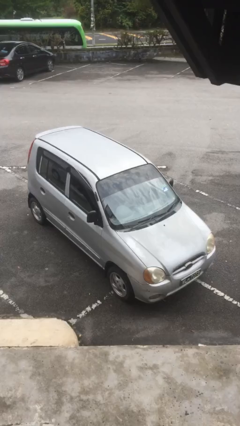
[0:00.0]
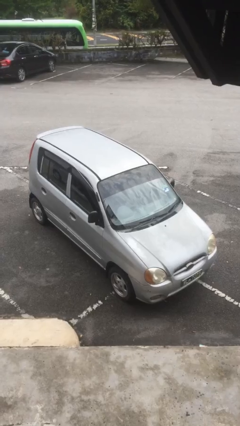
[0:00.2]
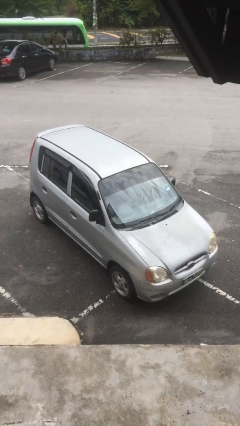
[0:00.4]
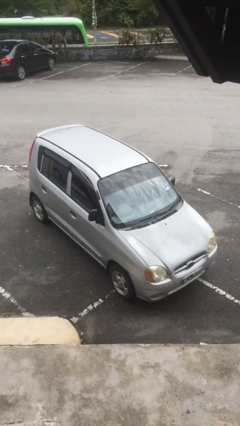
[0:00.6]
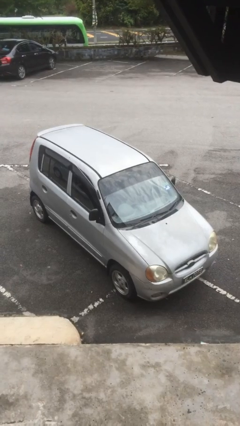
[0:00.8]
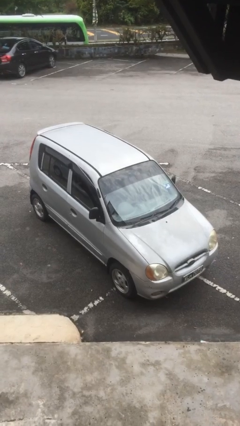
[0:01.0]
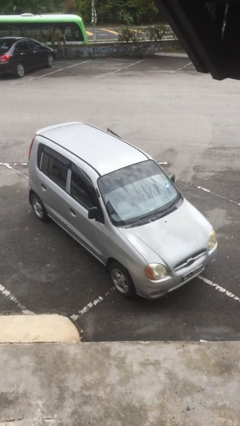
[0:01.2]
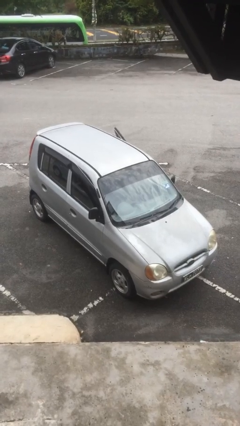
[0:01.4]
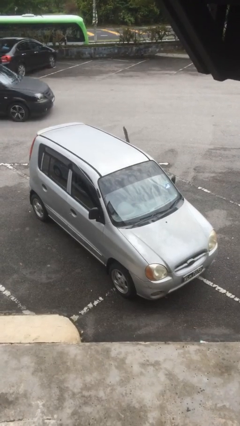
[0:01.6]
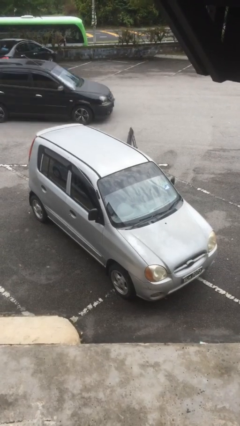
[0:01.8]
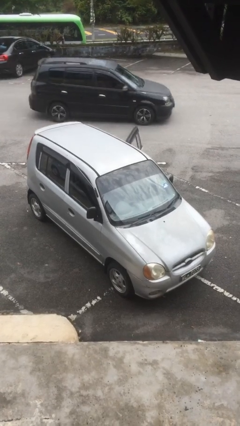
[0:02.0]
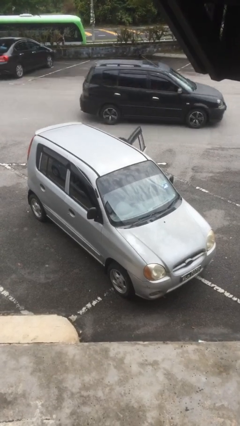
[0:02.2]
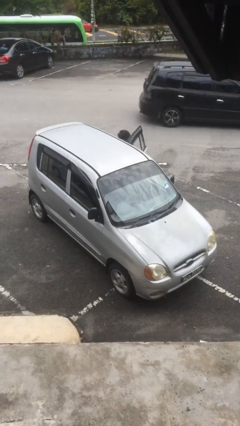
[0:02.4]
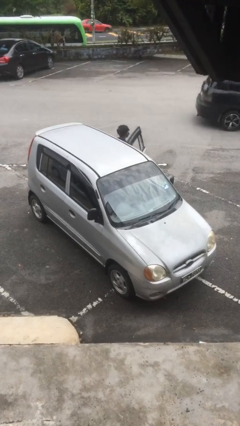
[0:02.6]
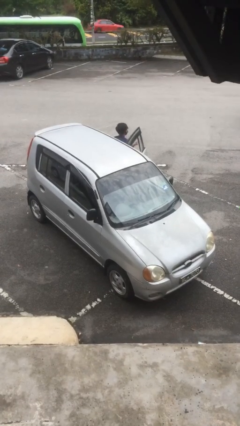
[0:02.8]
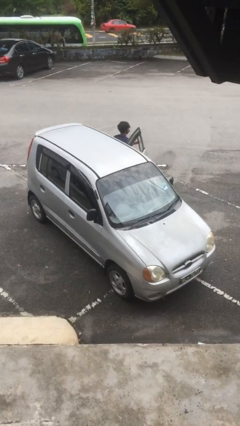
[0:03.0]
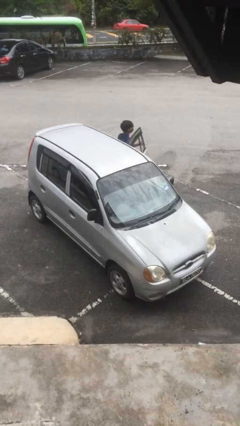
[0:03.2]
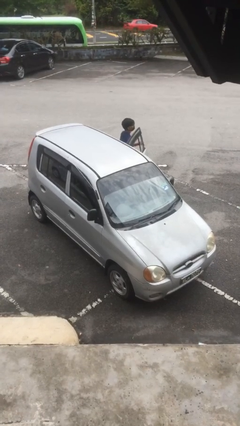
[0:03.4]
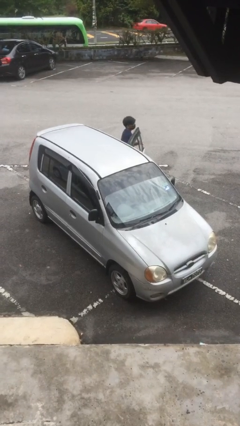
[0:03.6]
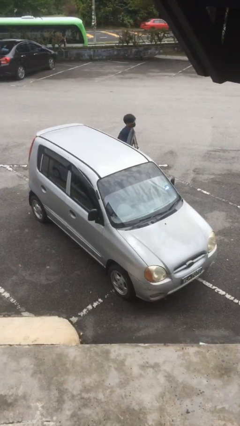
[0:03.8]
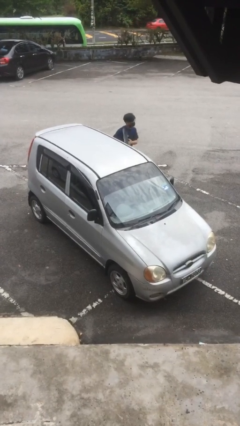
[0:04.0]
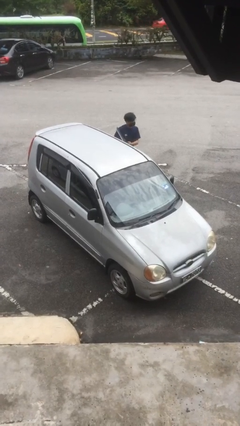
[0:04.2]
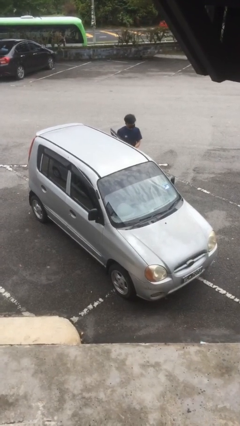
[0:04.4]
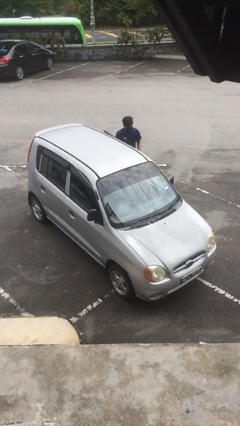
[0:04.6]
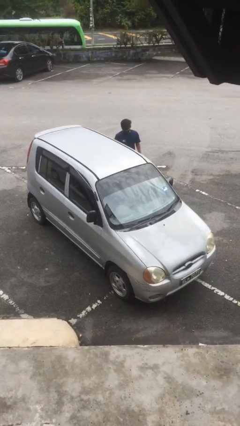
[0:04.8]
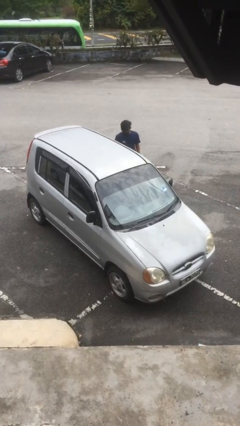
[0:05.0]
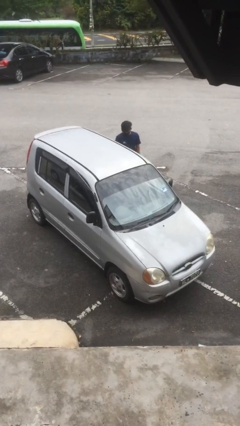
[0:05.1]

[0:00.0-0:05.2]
car drops off person

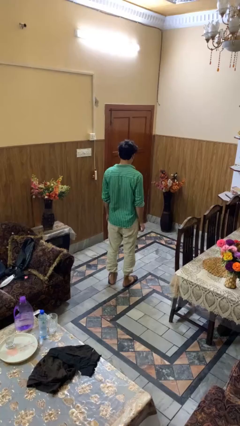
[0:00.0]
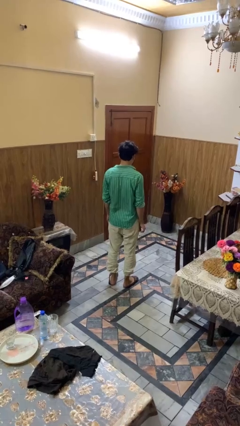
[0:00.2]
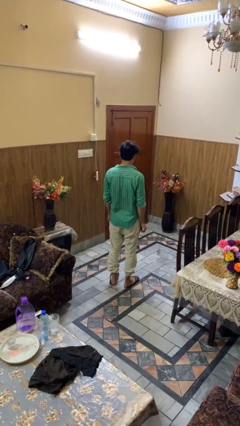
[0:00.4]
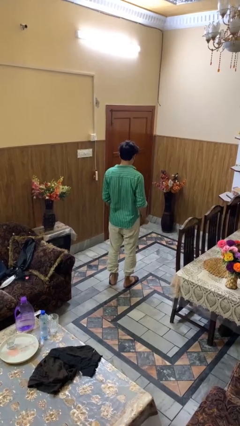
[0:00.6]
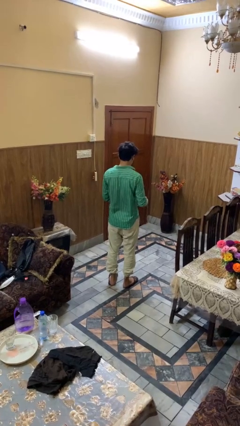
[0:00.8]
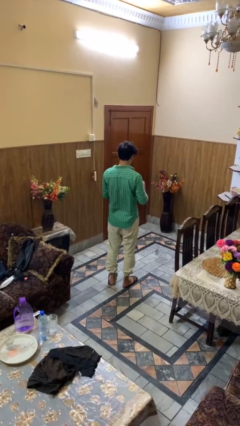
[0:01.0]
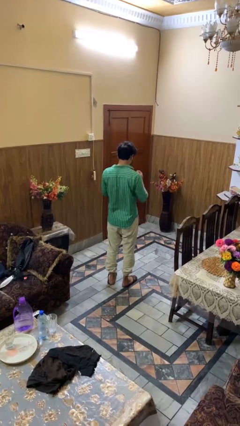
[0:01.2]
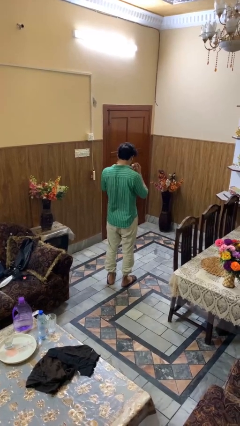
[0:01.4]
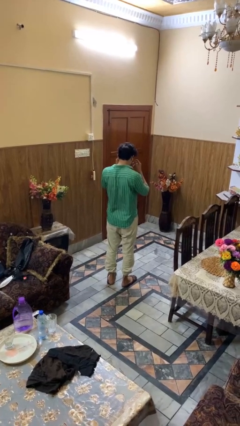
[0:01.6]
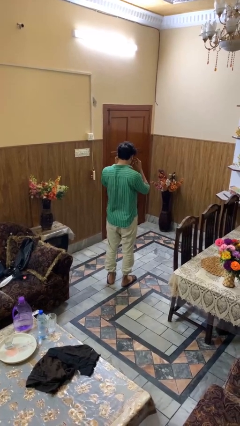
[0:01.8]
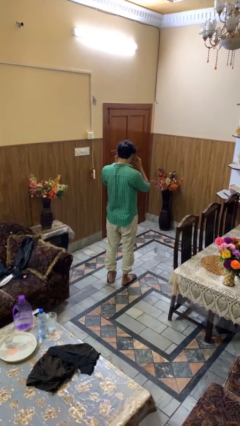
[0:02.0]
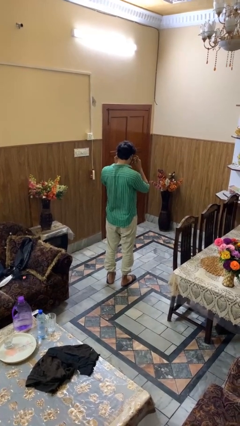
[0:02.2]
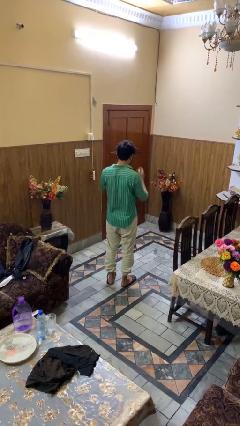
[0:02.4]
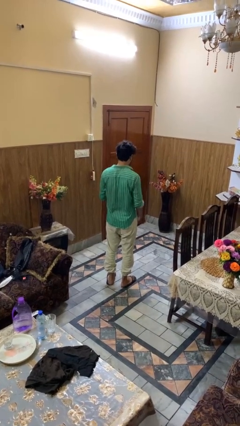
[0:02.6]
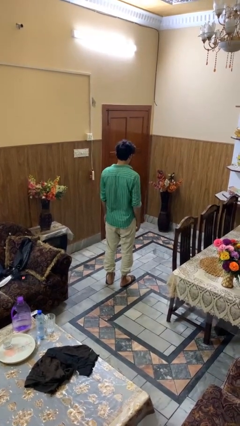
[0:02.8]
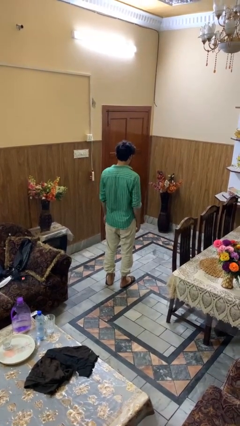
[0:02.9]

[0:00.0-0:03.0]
person puts on glasses

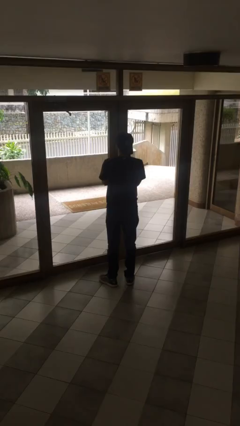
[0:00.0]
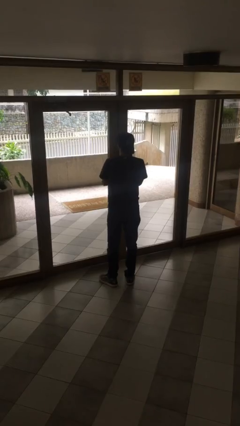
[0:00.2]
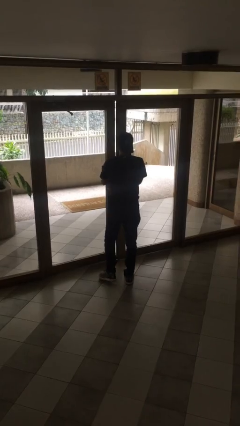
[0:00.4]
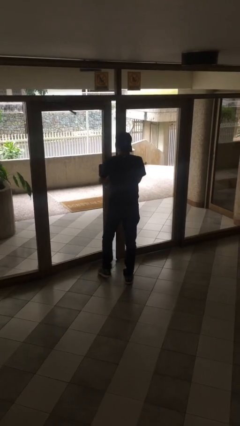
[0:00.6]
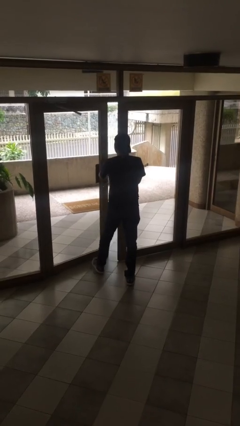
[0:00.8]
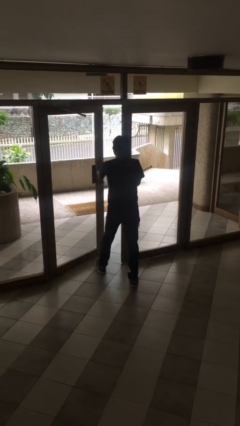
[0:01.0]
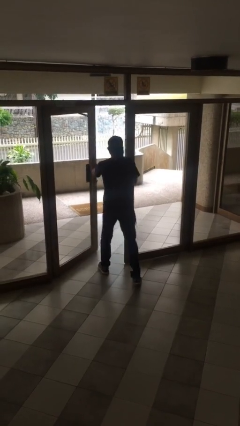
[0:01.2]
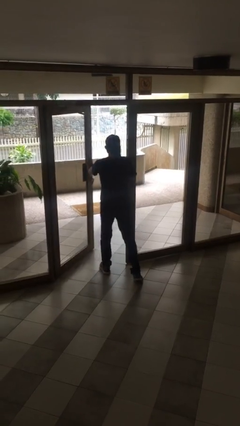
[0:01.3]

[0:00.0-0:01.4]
person opens facility door

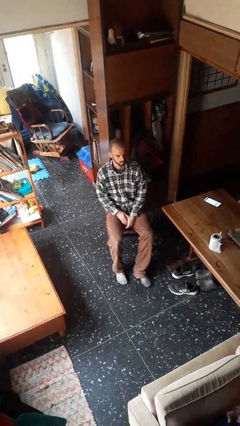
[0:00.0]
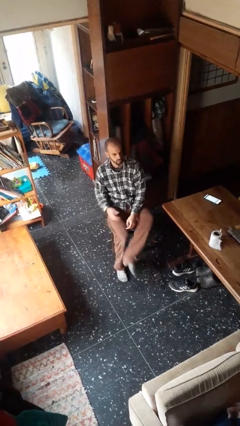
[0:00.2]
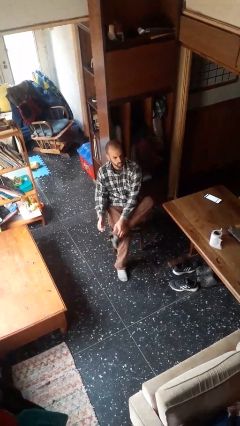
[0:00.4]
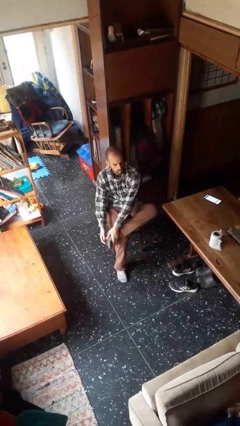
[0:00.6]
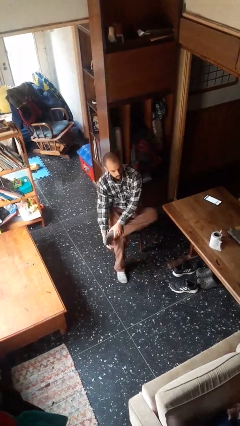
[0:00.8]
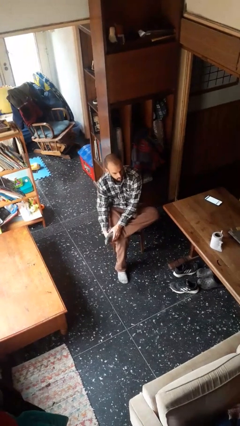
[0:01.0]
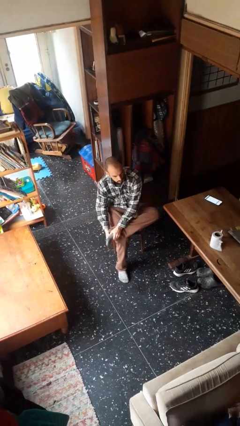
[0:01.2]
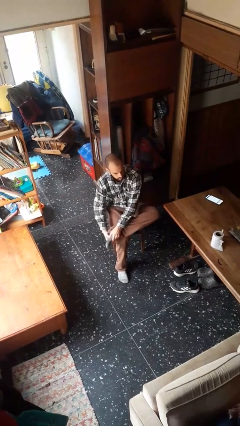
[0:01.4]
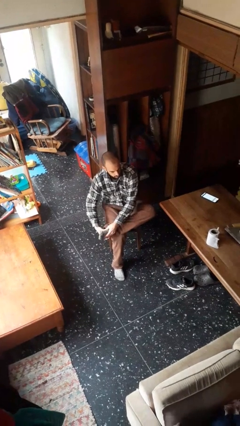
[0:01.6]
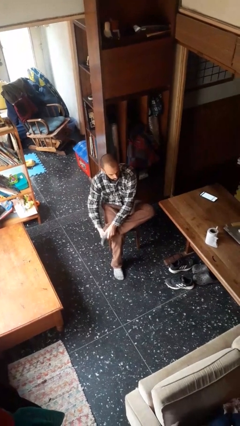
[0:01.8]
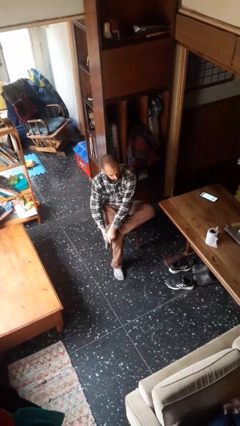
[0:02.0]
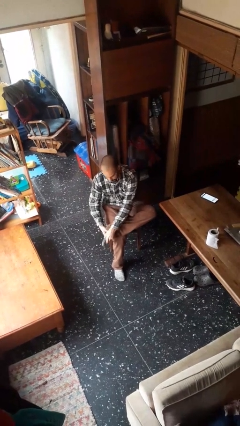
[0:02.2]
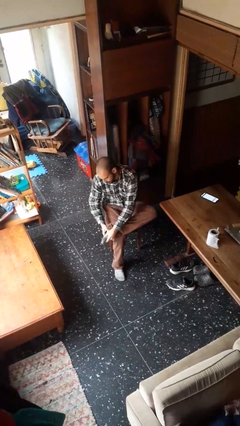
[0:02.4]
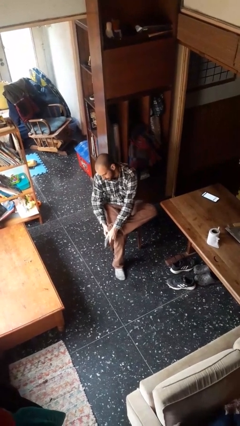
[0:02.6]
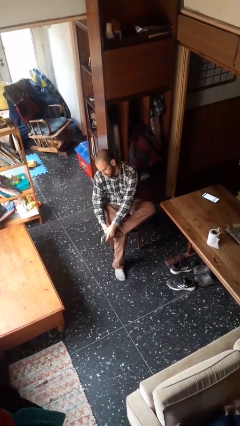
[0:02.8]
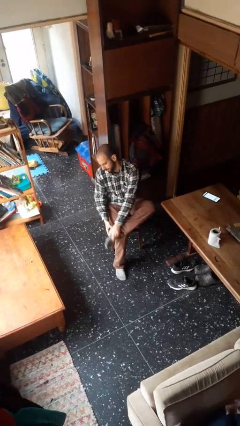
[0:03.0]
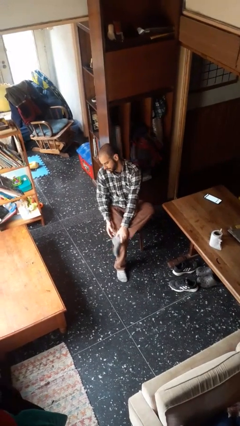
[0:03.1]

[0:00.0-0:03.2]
person rubs foot

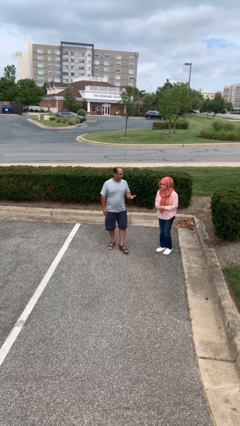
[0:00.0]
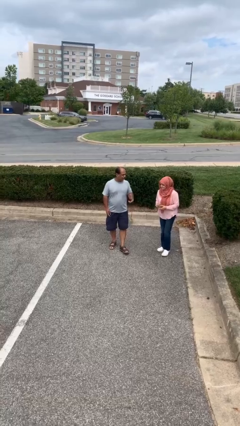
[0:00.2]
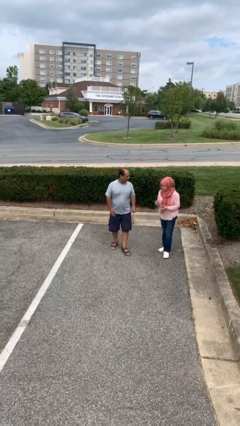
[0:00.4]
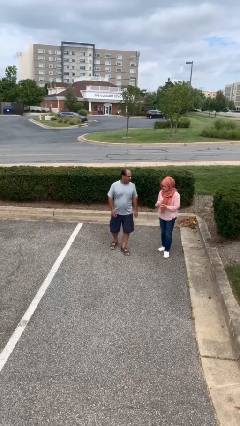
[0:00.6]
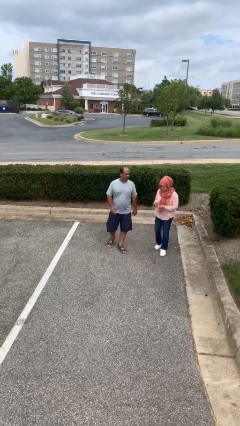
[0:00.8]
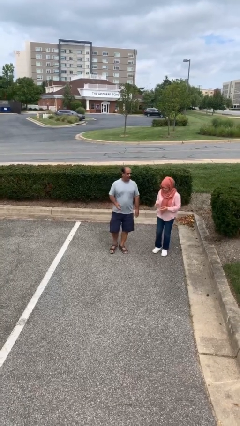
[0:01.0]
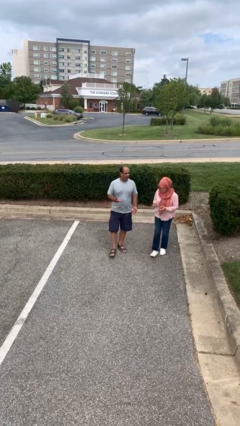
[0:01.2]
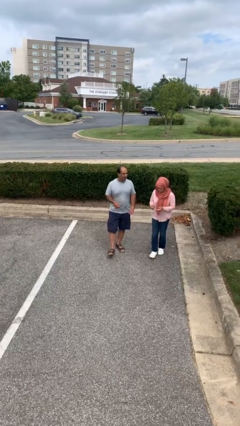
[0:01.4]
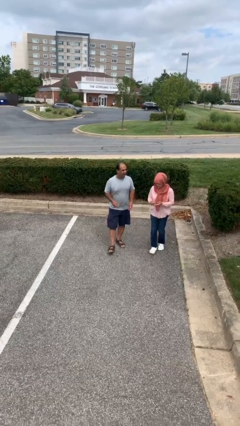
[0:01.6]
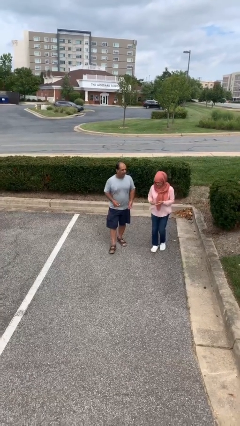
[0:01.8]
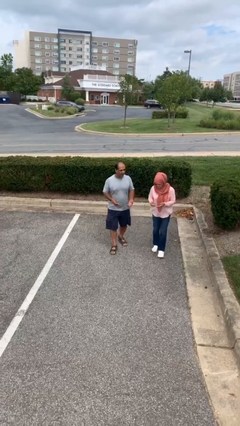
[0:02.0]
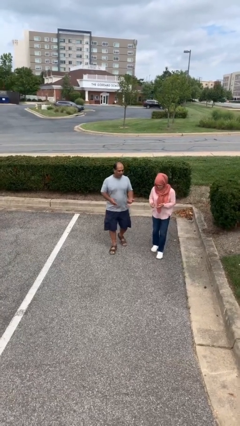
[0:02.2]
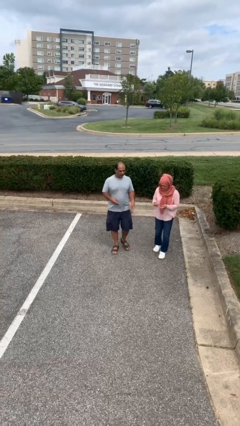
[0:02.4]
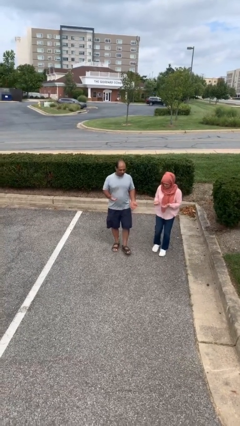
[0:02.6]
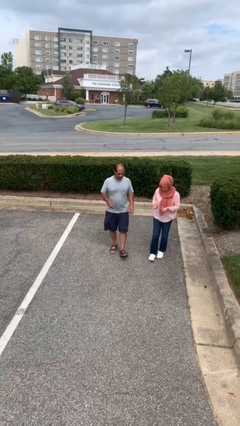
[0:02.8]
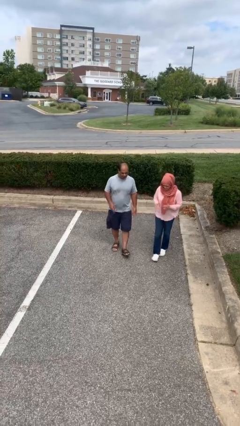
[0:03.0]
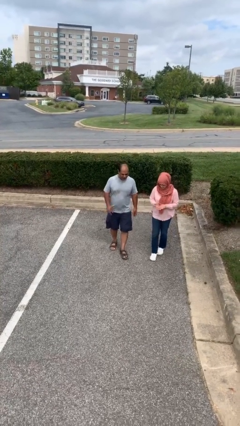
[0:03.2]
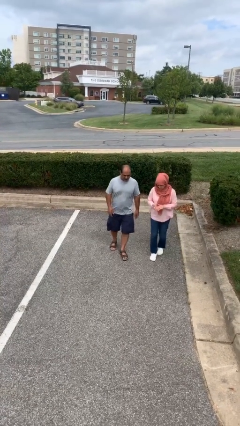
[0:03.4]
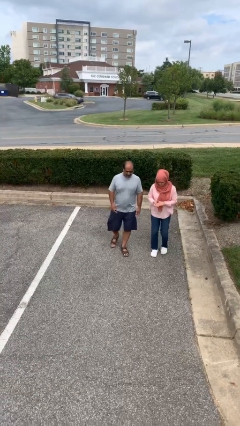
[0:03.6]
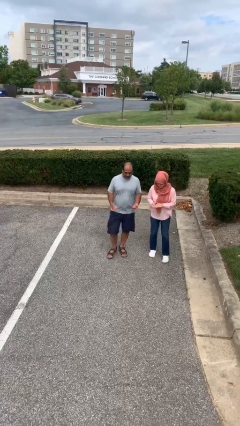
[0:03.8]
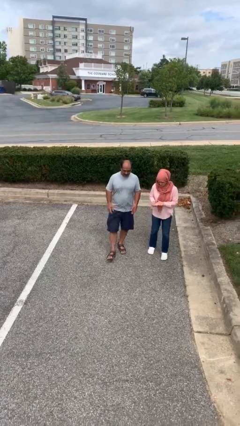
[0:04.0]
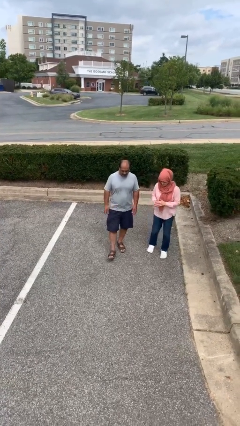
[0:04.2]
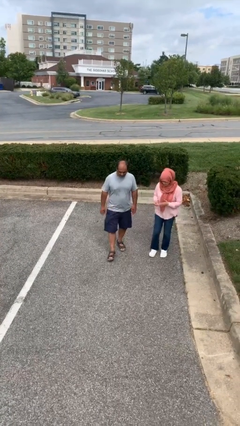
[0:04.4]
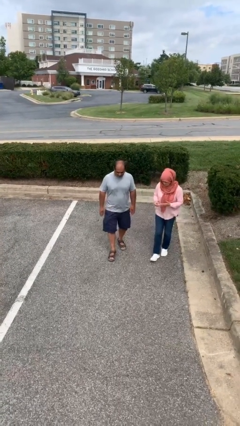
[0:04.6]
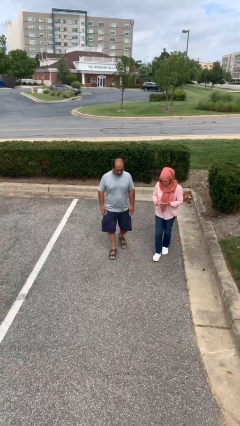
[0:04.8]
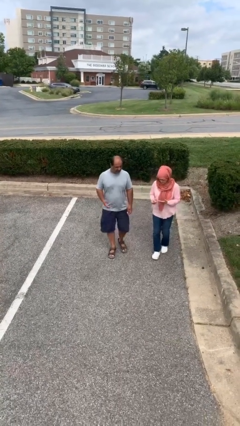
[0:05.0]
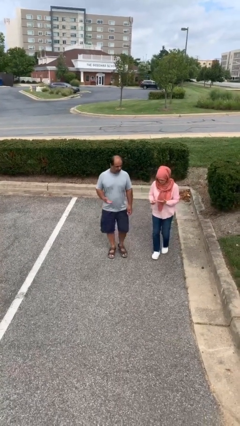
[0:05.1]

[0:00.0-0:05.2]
person talks to person
